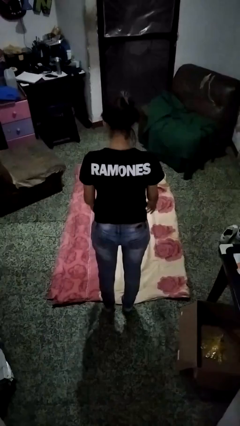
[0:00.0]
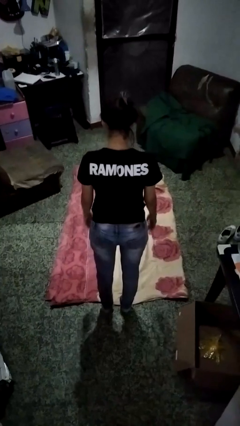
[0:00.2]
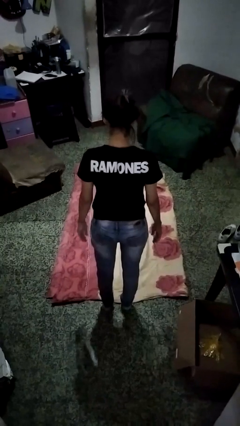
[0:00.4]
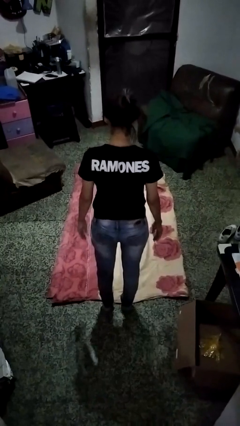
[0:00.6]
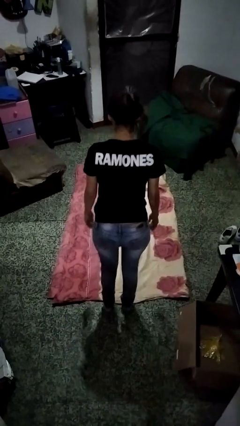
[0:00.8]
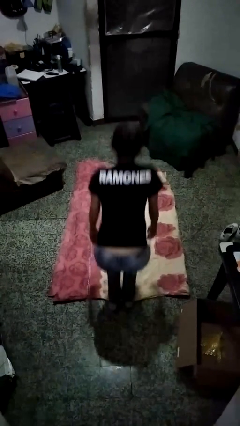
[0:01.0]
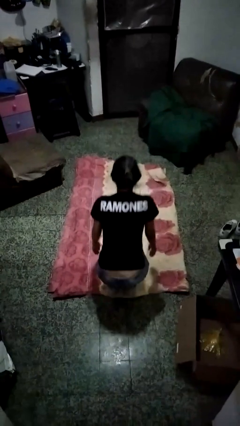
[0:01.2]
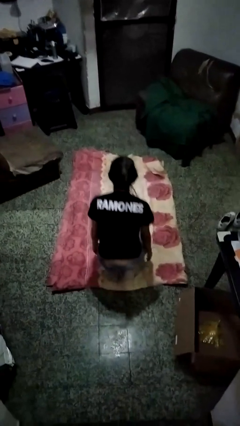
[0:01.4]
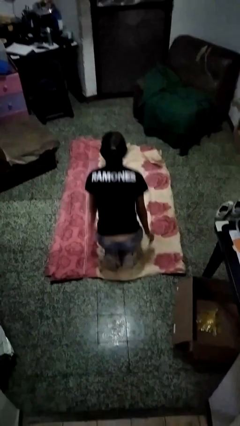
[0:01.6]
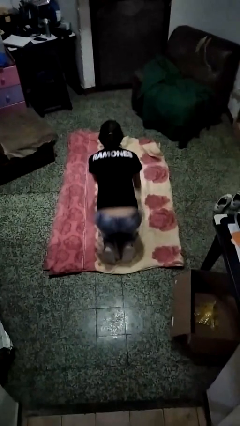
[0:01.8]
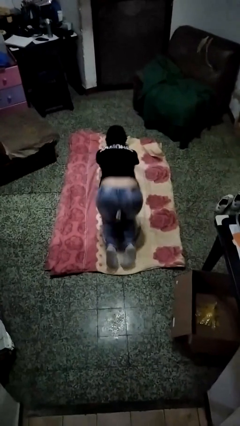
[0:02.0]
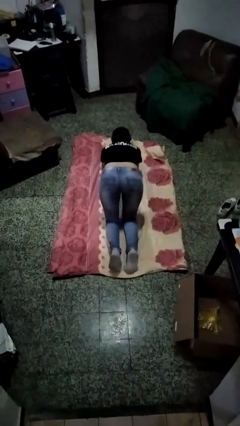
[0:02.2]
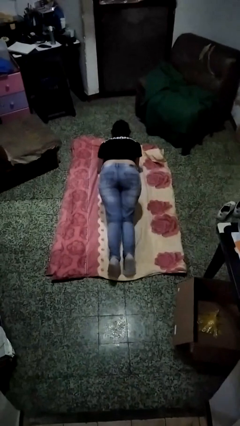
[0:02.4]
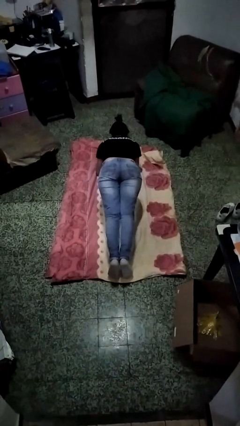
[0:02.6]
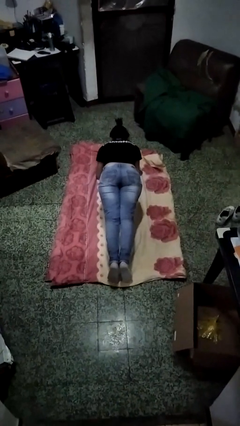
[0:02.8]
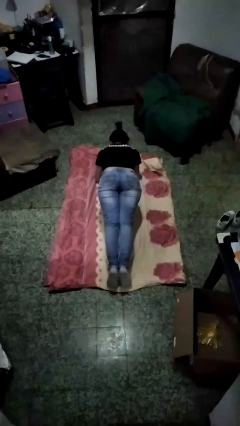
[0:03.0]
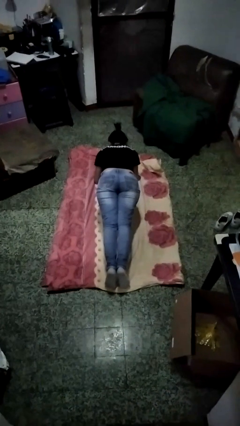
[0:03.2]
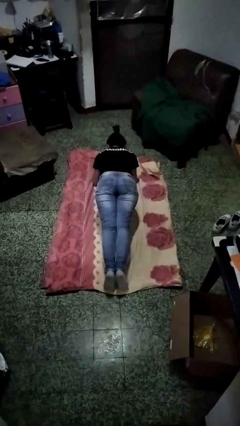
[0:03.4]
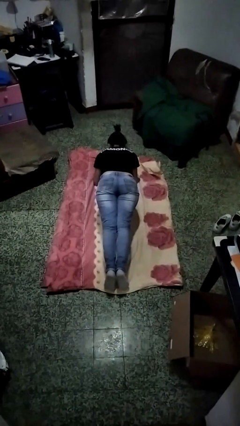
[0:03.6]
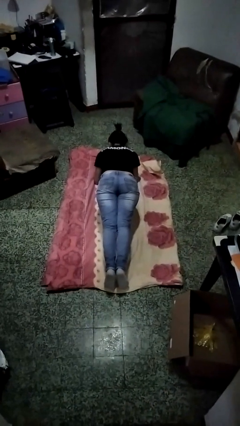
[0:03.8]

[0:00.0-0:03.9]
person exercises with plank

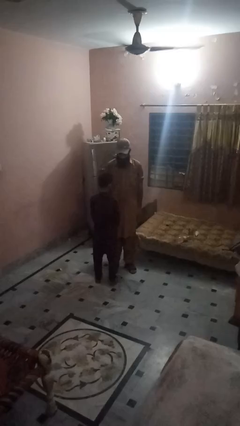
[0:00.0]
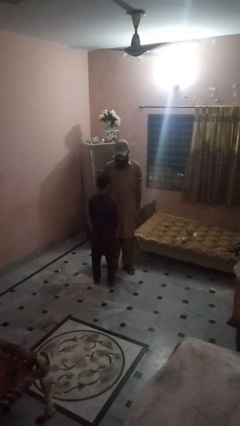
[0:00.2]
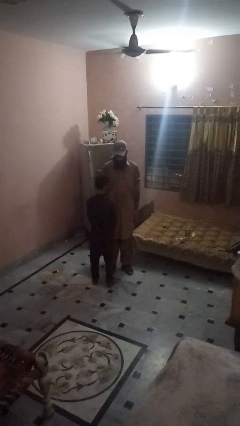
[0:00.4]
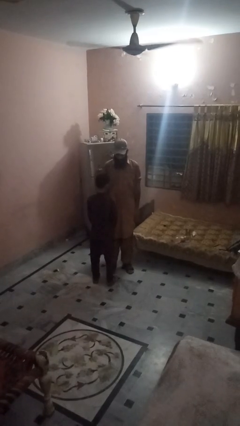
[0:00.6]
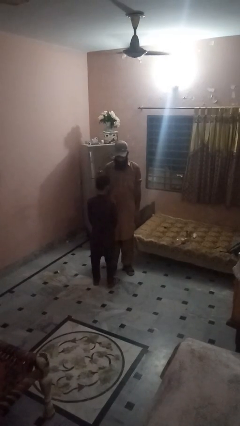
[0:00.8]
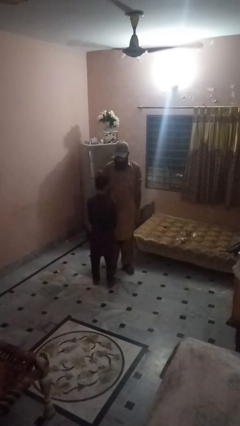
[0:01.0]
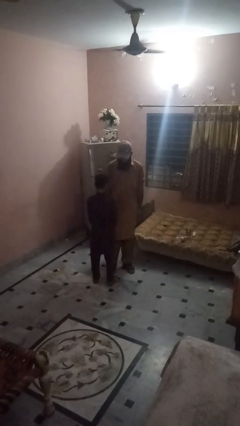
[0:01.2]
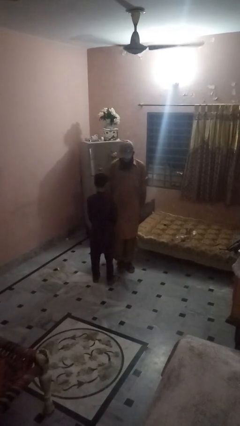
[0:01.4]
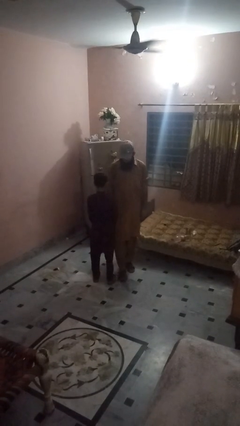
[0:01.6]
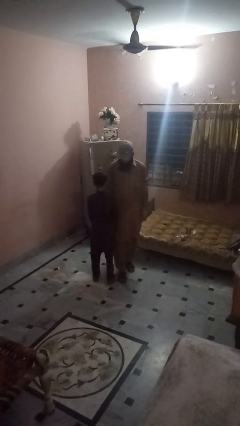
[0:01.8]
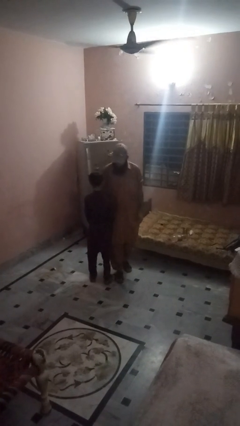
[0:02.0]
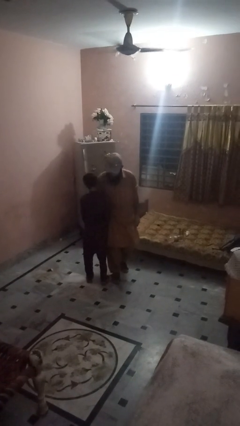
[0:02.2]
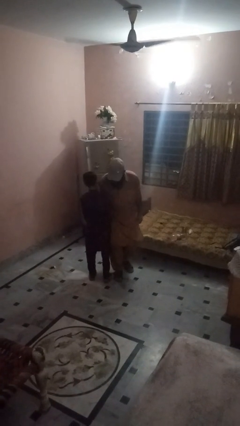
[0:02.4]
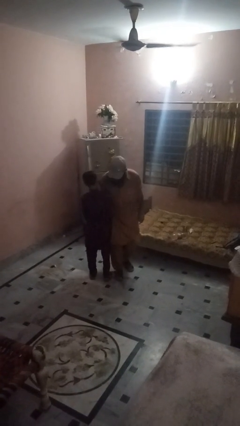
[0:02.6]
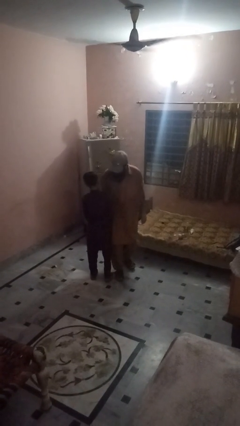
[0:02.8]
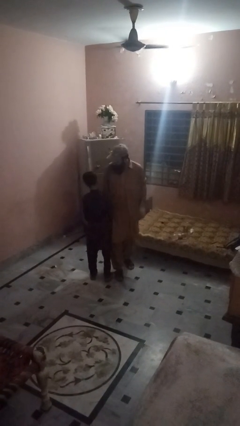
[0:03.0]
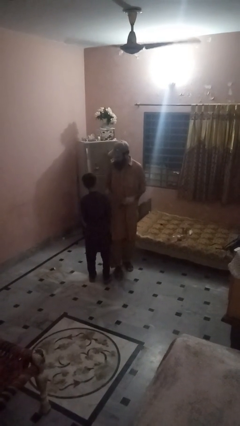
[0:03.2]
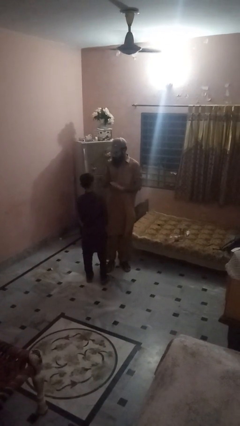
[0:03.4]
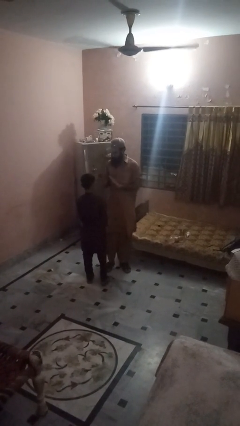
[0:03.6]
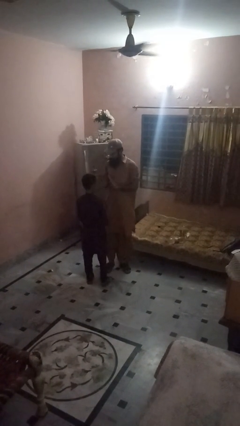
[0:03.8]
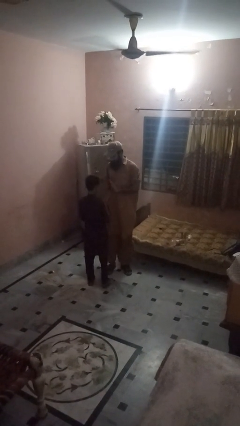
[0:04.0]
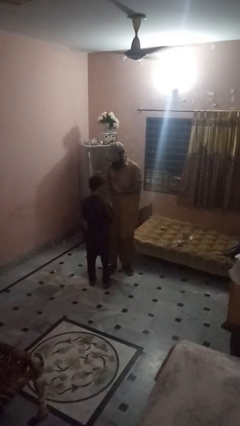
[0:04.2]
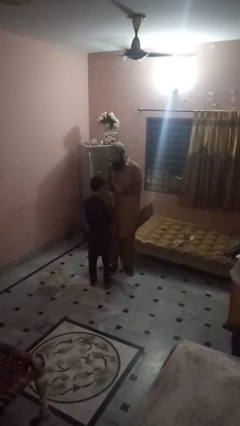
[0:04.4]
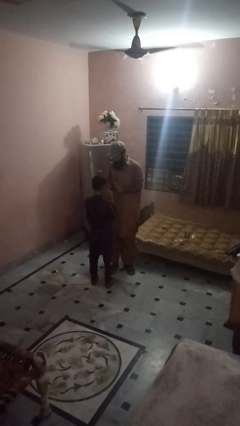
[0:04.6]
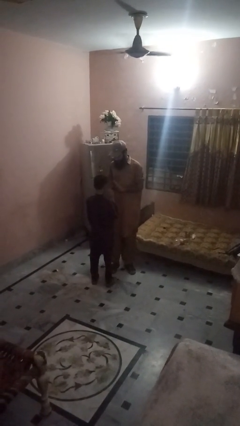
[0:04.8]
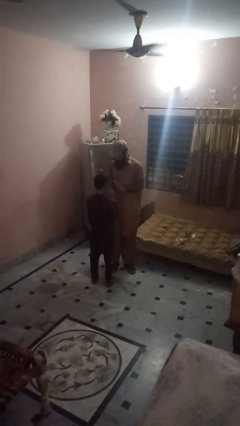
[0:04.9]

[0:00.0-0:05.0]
person bumps into person

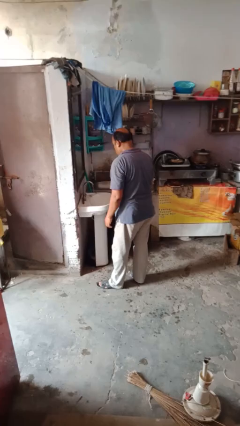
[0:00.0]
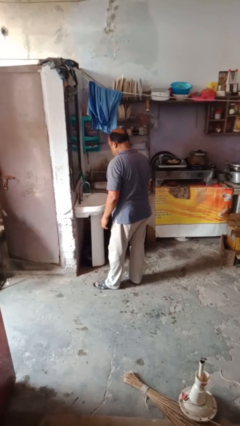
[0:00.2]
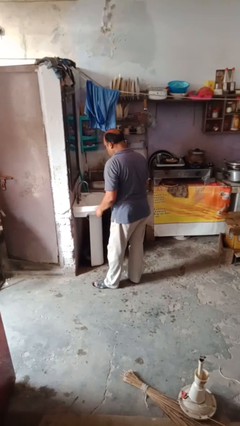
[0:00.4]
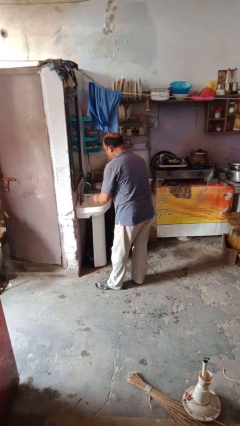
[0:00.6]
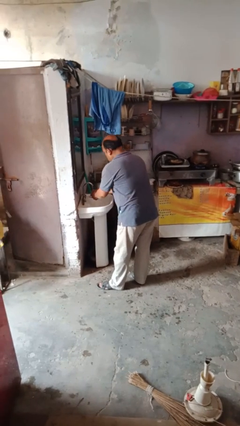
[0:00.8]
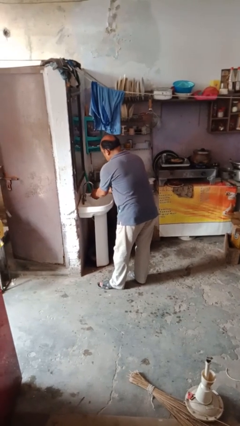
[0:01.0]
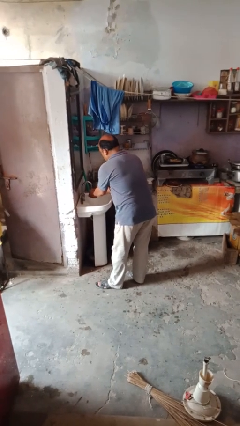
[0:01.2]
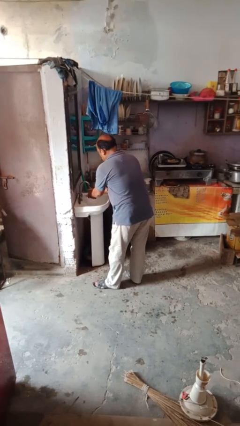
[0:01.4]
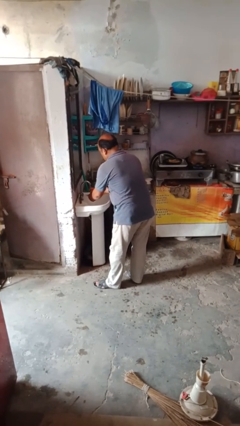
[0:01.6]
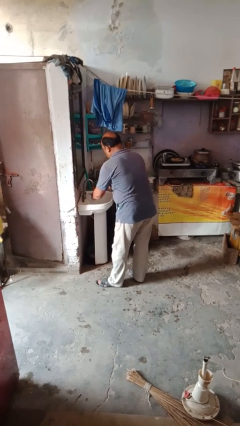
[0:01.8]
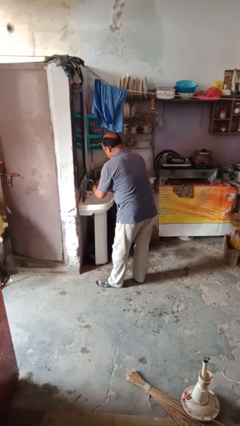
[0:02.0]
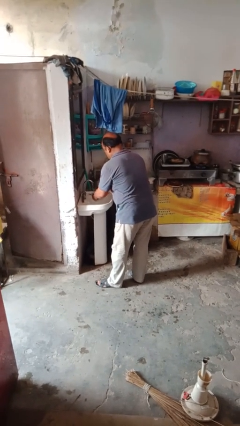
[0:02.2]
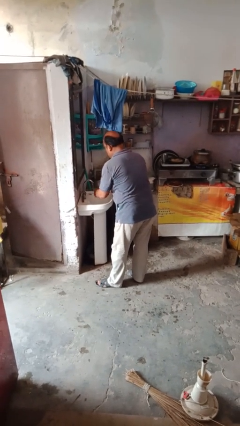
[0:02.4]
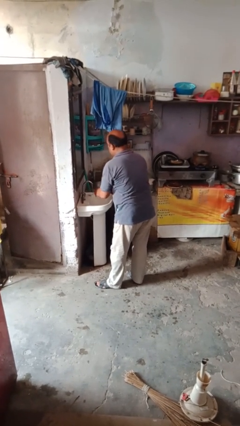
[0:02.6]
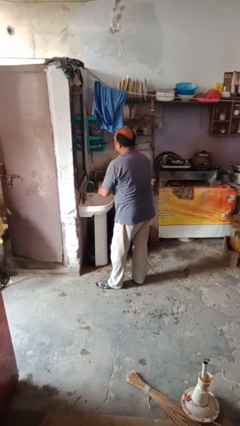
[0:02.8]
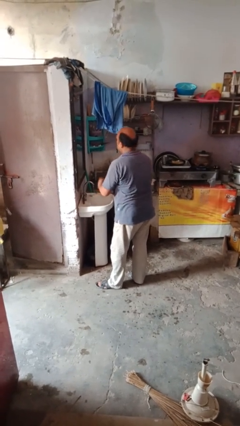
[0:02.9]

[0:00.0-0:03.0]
person washes hands

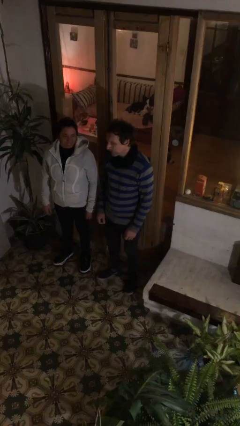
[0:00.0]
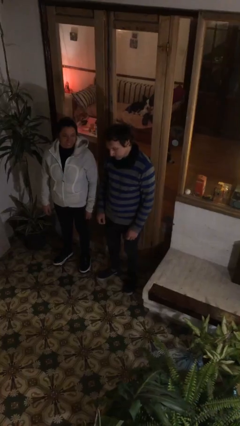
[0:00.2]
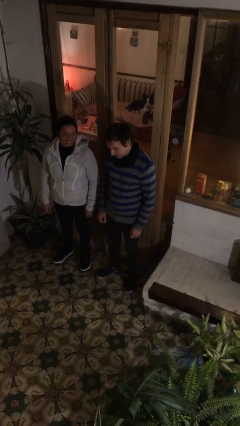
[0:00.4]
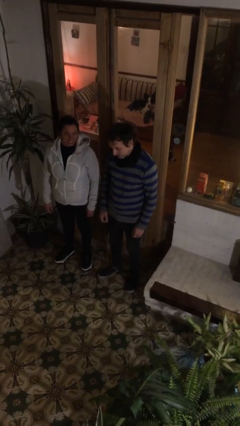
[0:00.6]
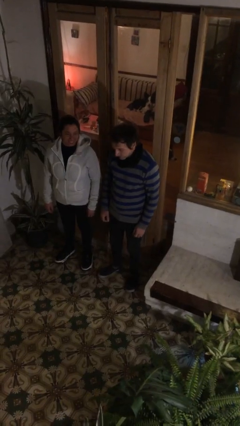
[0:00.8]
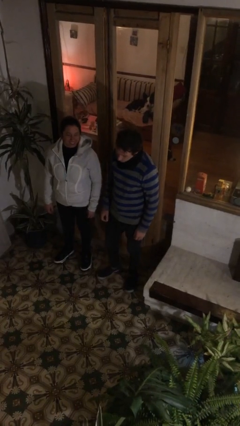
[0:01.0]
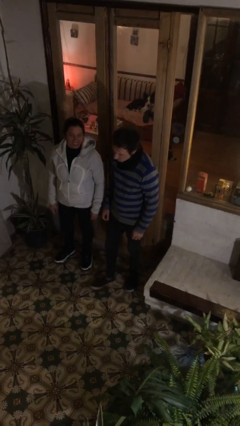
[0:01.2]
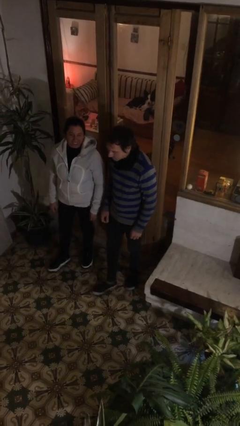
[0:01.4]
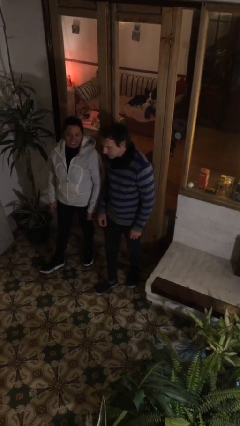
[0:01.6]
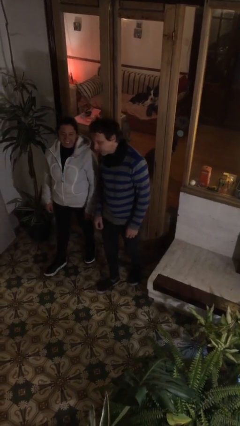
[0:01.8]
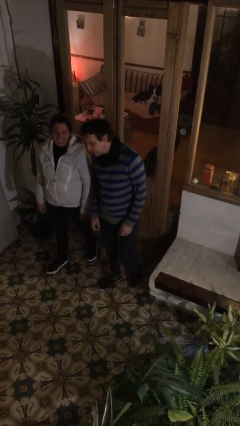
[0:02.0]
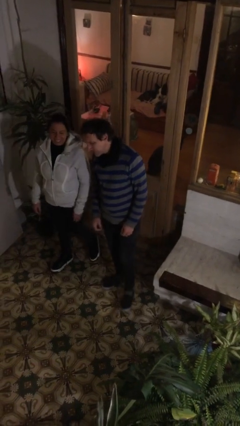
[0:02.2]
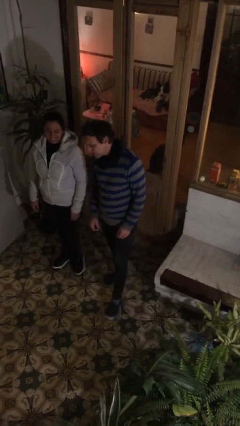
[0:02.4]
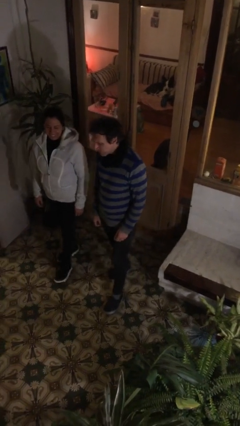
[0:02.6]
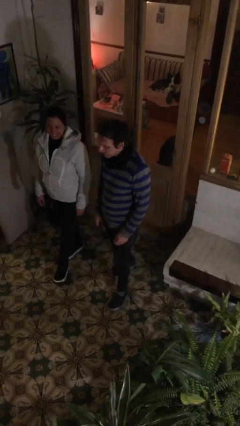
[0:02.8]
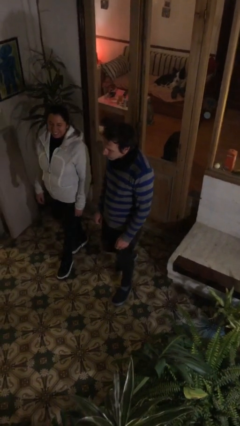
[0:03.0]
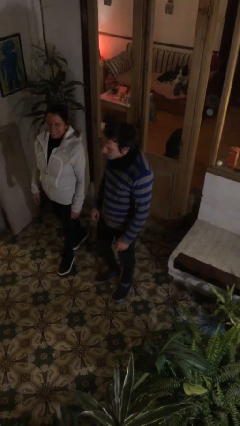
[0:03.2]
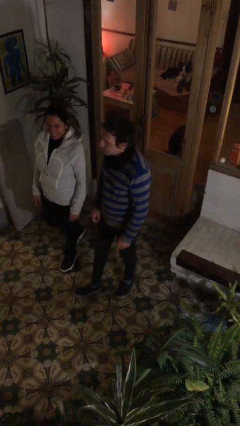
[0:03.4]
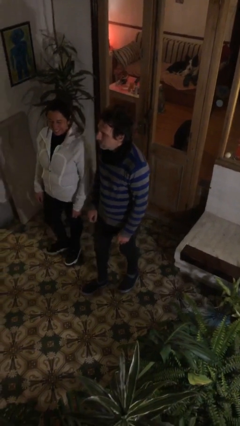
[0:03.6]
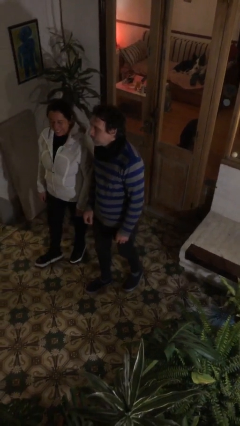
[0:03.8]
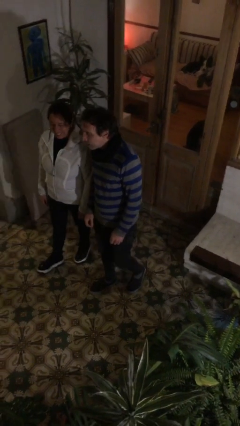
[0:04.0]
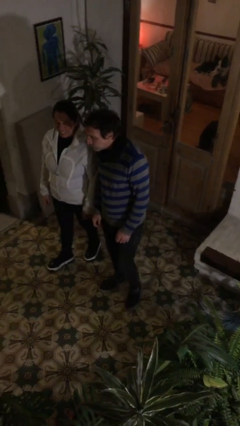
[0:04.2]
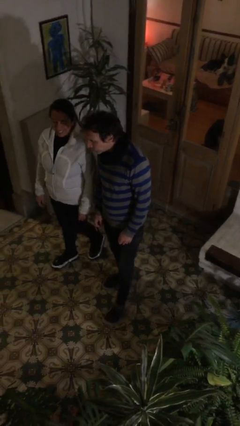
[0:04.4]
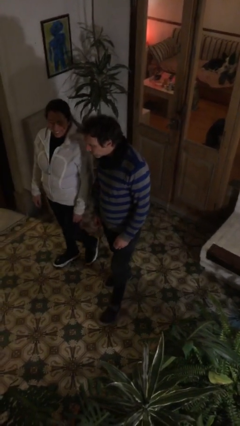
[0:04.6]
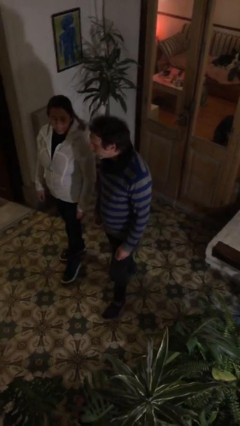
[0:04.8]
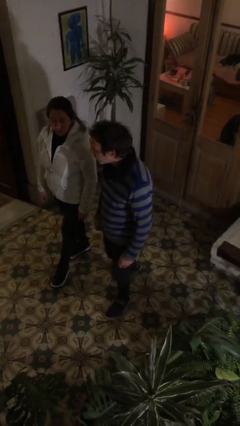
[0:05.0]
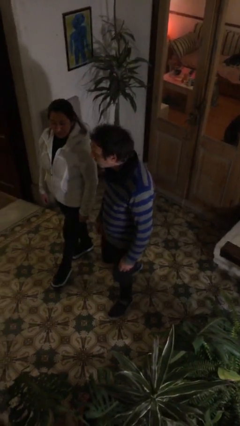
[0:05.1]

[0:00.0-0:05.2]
person talks to person

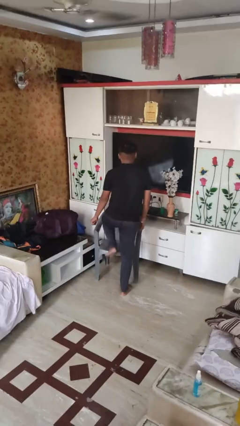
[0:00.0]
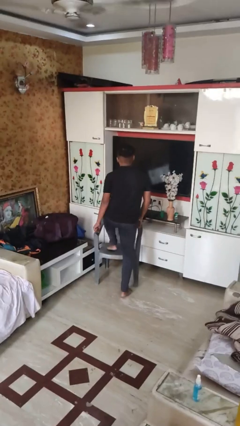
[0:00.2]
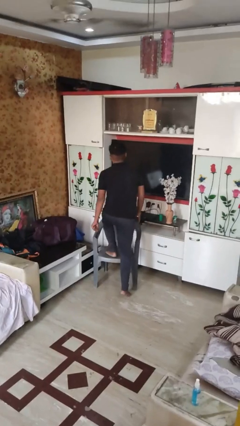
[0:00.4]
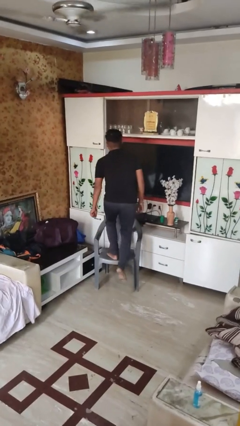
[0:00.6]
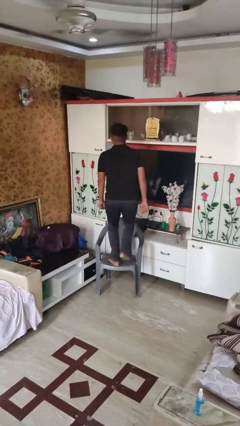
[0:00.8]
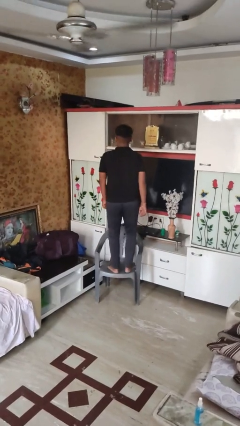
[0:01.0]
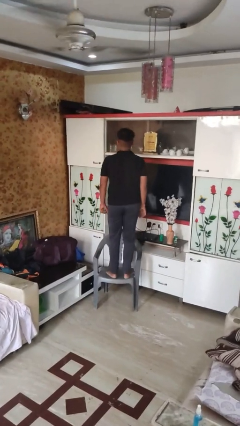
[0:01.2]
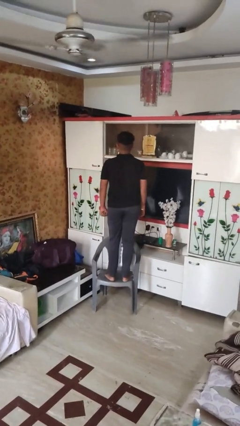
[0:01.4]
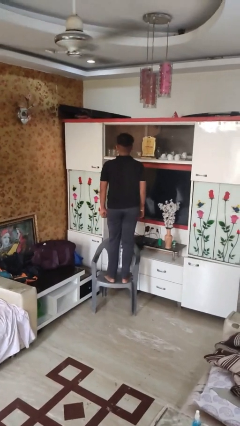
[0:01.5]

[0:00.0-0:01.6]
person climbs on chair
